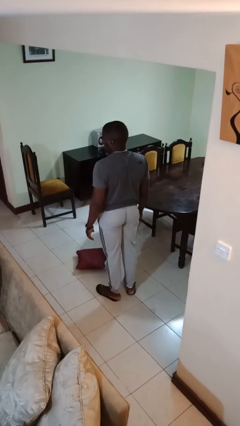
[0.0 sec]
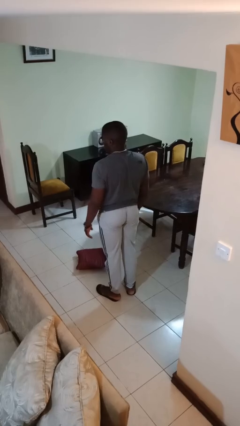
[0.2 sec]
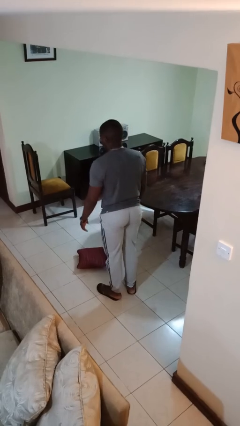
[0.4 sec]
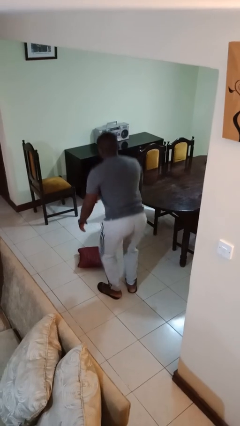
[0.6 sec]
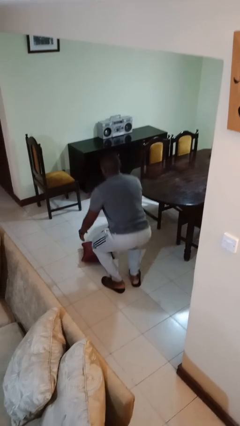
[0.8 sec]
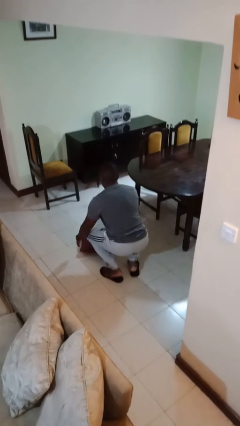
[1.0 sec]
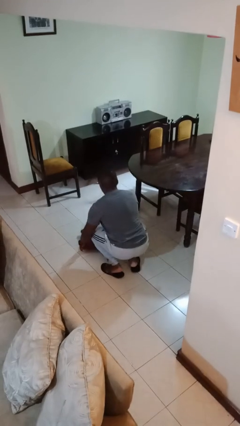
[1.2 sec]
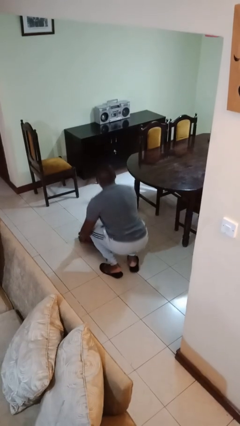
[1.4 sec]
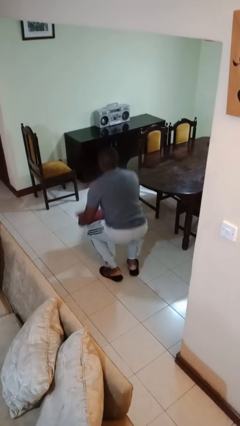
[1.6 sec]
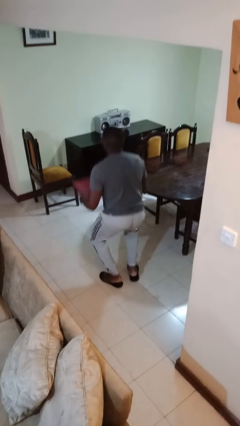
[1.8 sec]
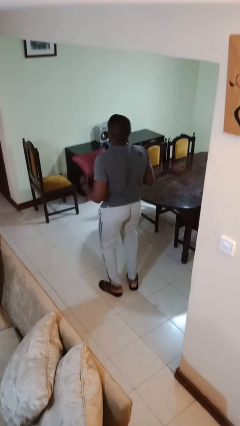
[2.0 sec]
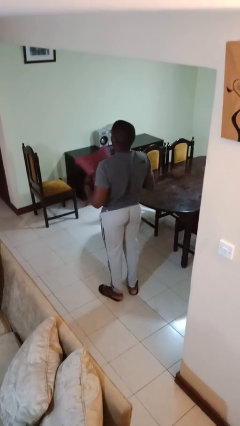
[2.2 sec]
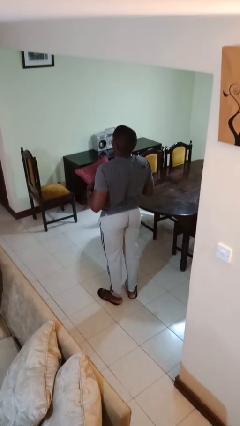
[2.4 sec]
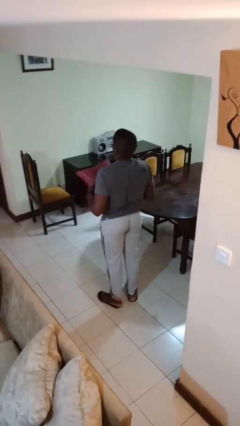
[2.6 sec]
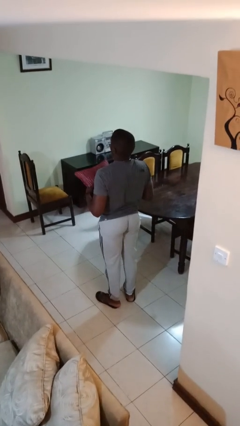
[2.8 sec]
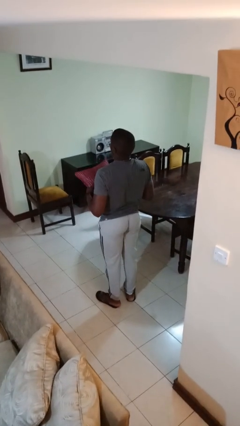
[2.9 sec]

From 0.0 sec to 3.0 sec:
person picks up object from floor

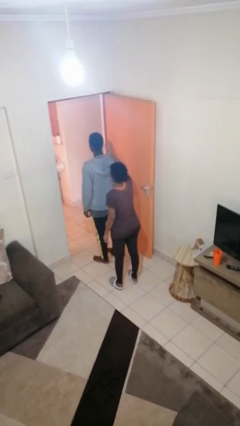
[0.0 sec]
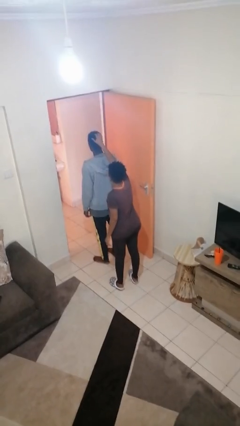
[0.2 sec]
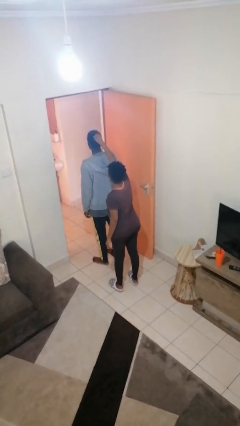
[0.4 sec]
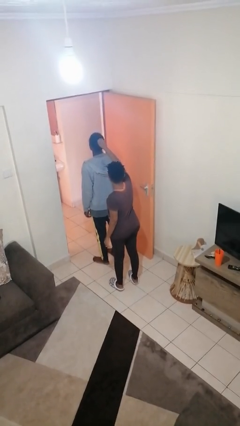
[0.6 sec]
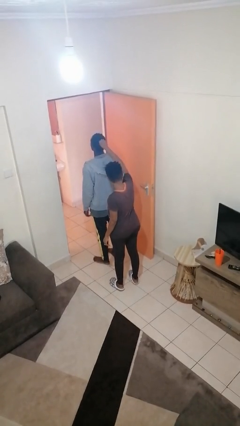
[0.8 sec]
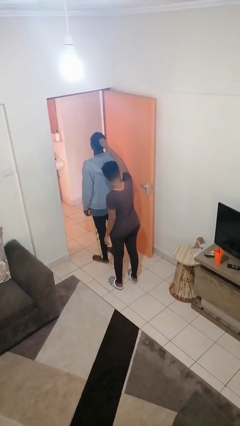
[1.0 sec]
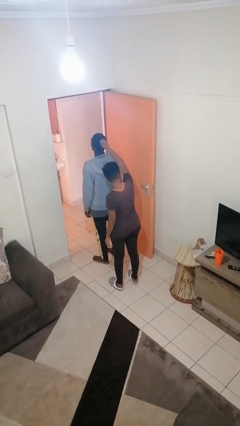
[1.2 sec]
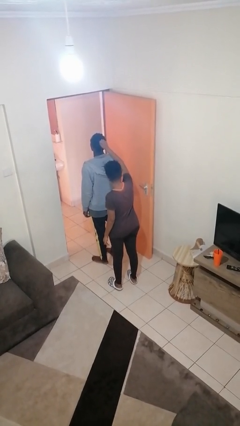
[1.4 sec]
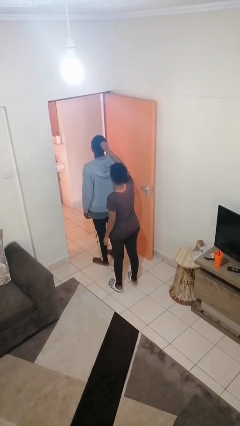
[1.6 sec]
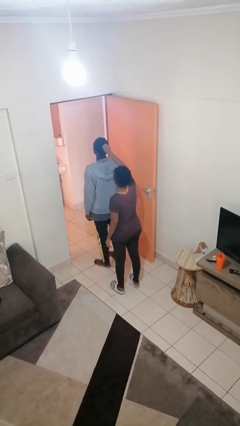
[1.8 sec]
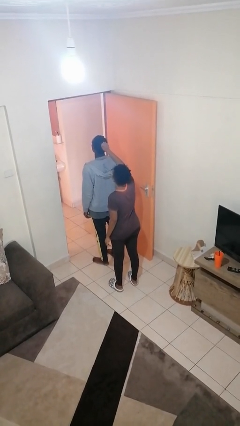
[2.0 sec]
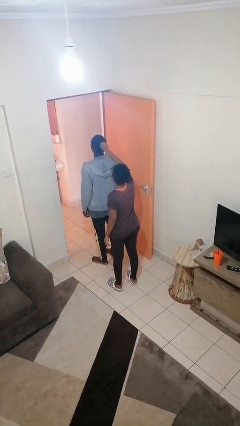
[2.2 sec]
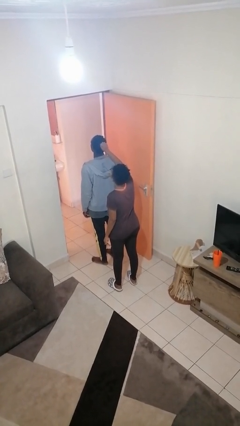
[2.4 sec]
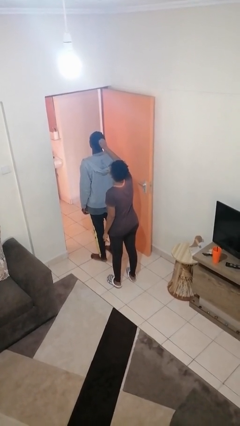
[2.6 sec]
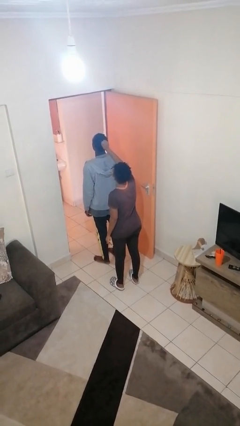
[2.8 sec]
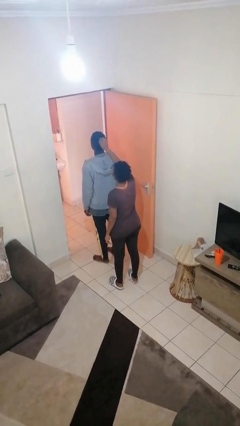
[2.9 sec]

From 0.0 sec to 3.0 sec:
person grabs person by hair

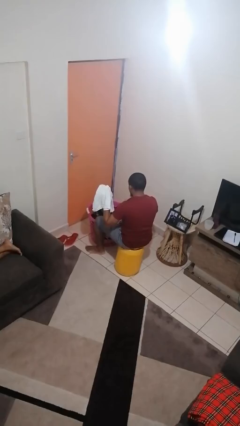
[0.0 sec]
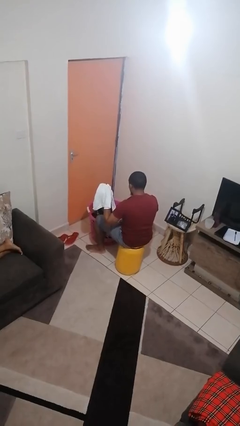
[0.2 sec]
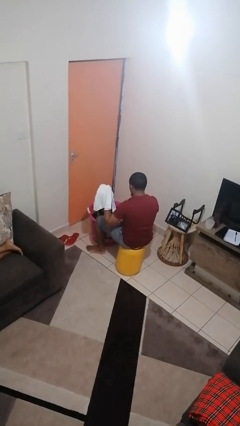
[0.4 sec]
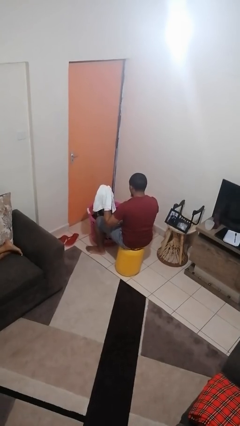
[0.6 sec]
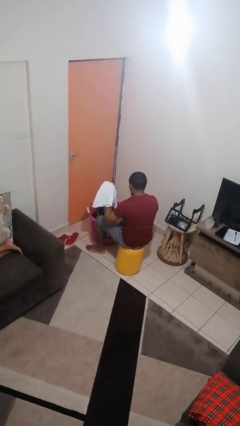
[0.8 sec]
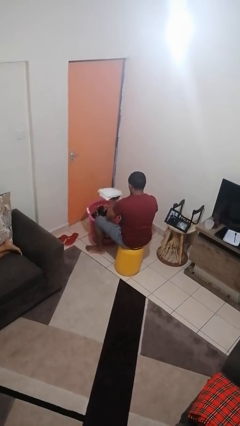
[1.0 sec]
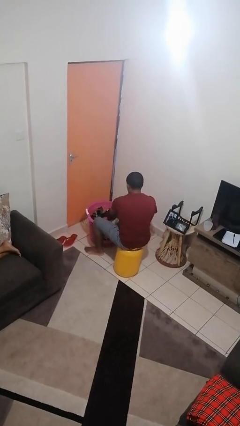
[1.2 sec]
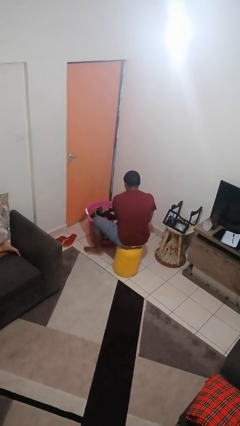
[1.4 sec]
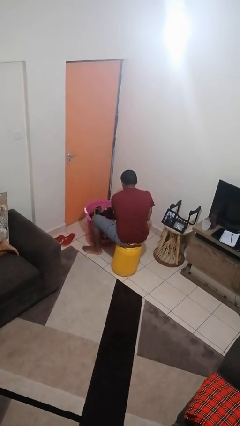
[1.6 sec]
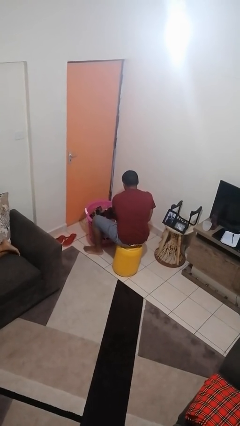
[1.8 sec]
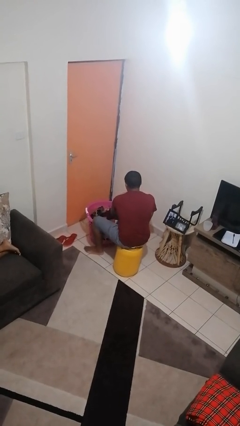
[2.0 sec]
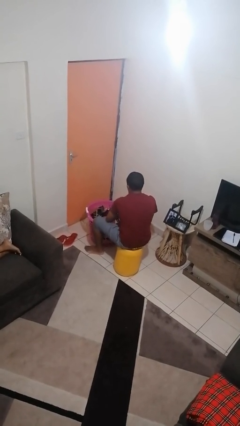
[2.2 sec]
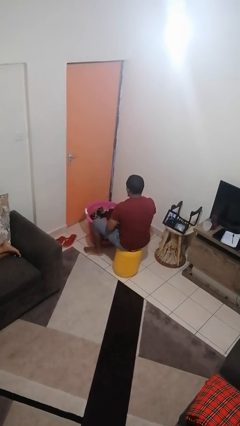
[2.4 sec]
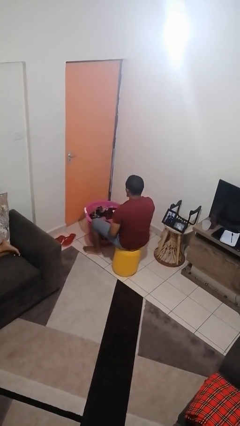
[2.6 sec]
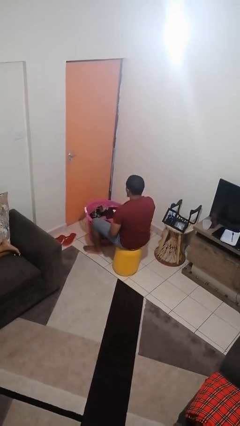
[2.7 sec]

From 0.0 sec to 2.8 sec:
person puts object into basket

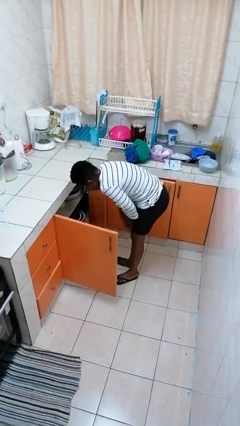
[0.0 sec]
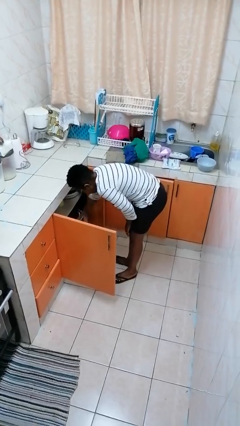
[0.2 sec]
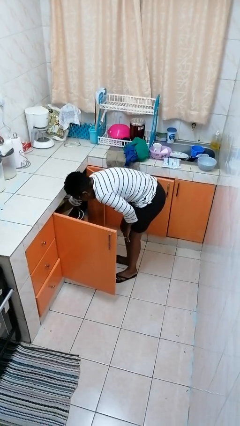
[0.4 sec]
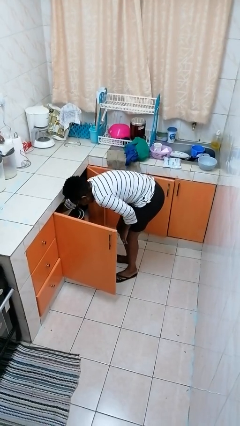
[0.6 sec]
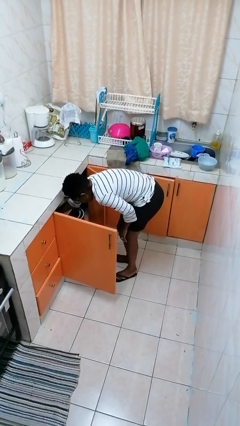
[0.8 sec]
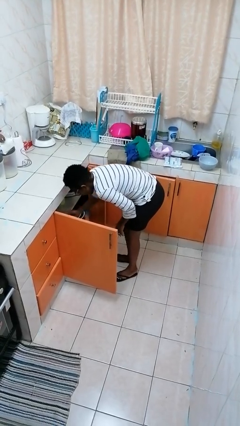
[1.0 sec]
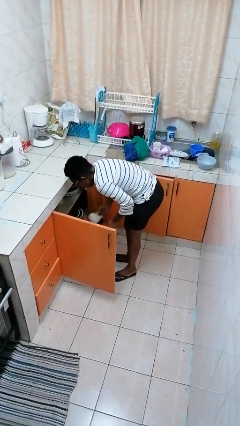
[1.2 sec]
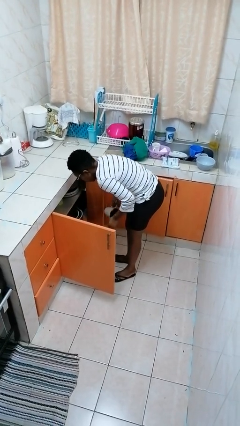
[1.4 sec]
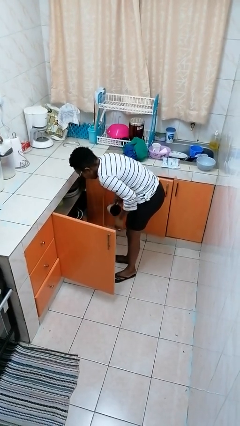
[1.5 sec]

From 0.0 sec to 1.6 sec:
person takes object from cabinet

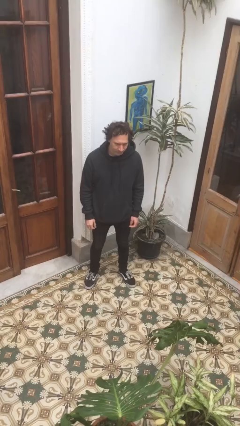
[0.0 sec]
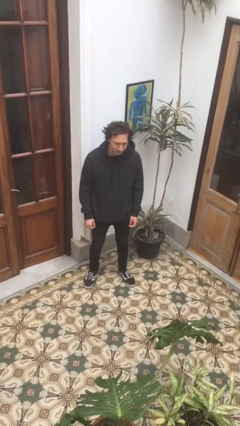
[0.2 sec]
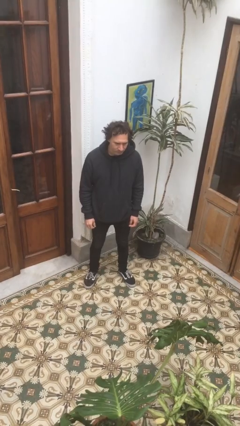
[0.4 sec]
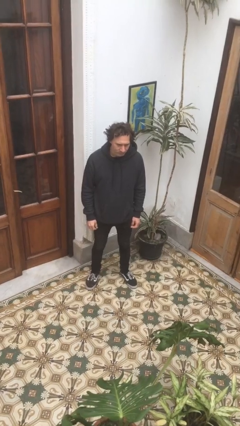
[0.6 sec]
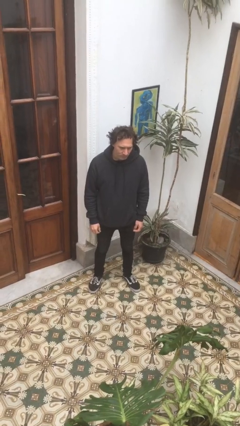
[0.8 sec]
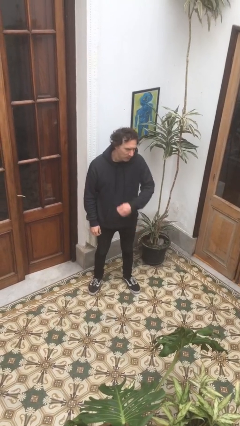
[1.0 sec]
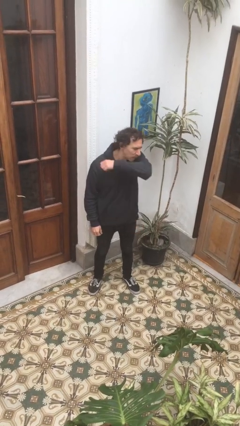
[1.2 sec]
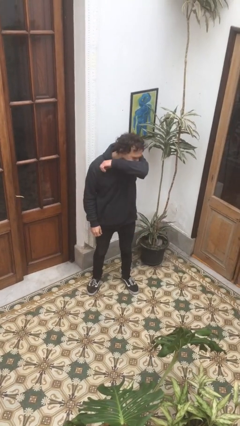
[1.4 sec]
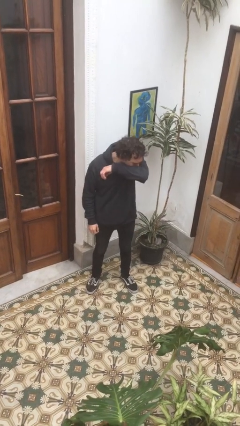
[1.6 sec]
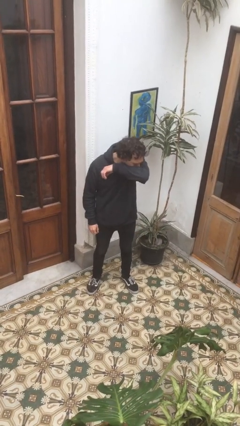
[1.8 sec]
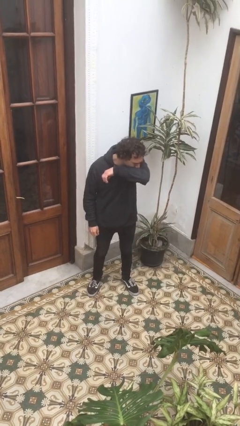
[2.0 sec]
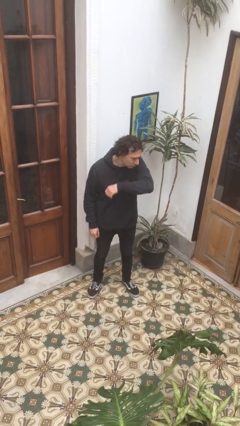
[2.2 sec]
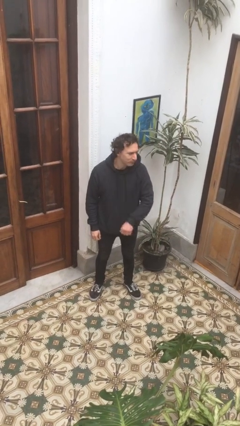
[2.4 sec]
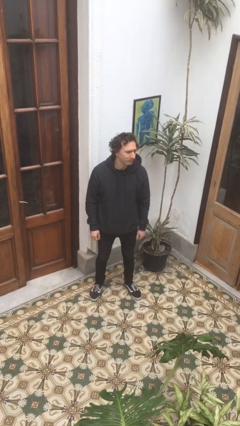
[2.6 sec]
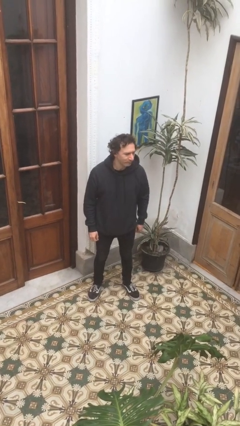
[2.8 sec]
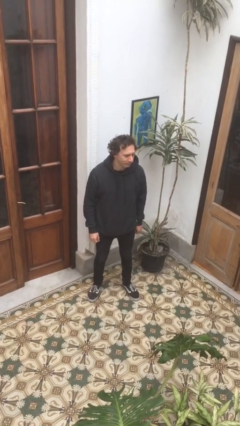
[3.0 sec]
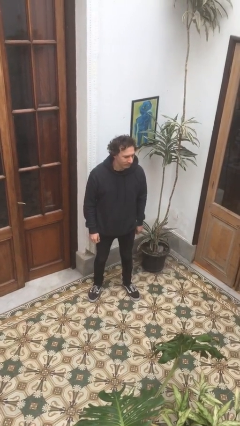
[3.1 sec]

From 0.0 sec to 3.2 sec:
person sneezes into arm

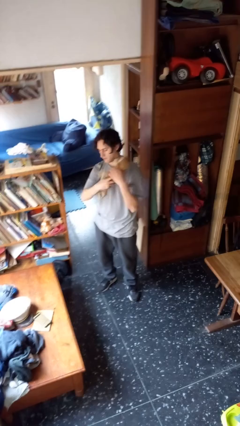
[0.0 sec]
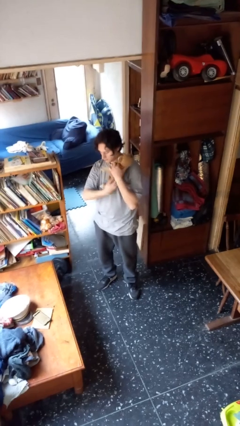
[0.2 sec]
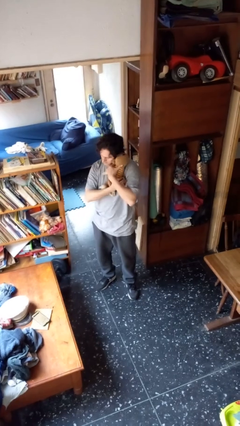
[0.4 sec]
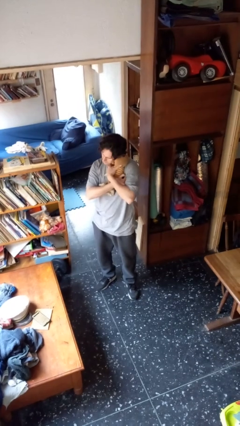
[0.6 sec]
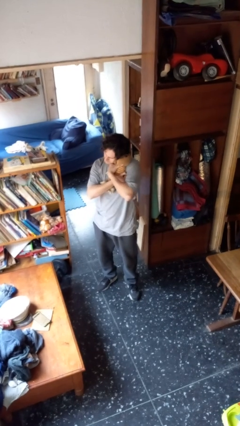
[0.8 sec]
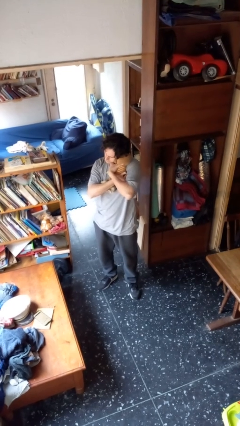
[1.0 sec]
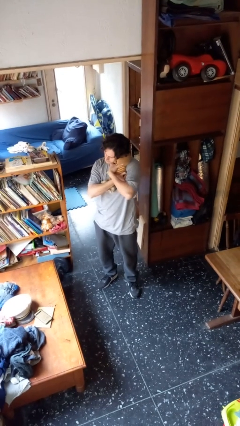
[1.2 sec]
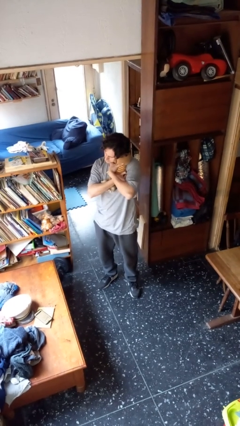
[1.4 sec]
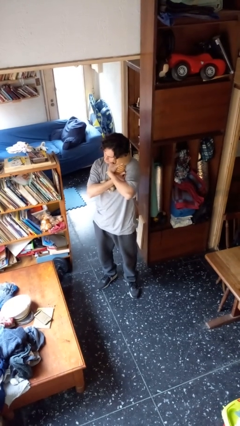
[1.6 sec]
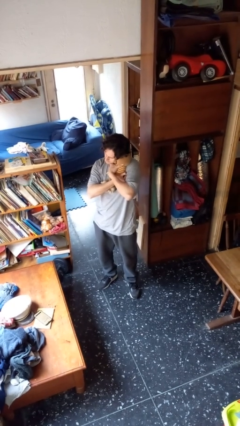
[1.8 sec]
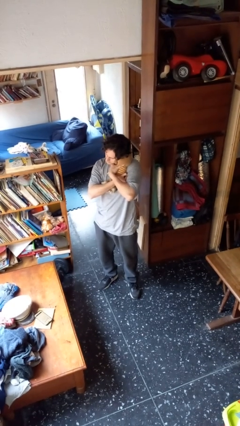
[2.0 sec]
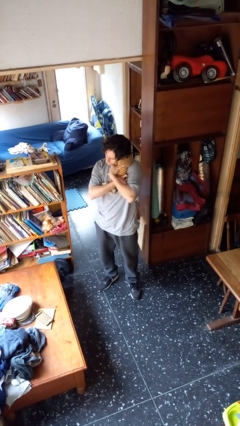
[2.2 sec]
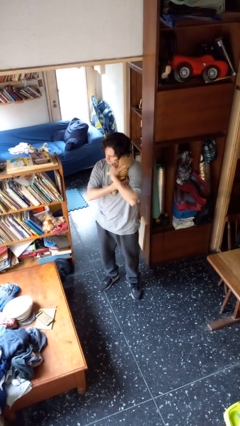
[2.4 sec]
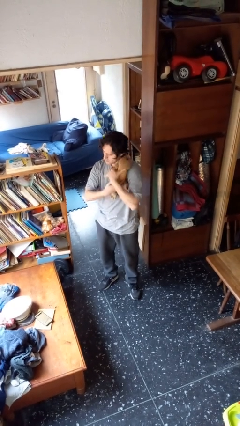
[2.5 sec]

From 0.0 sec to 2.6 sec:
person hugs stuffed animal

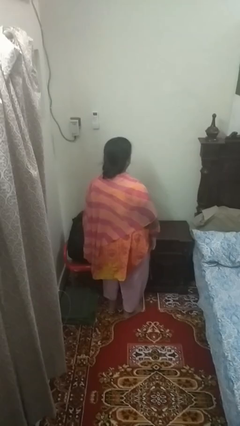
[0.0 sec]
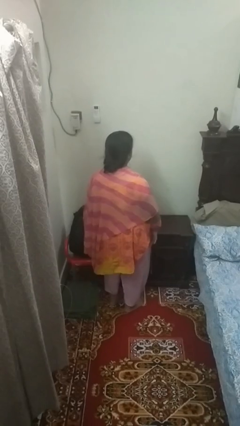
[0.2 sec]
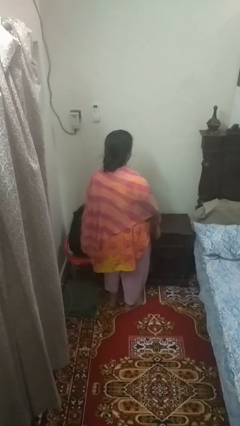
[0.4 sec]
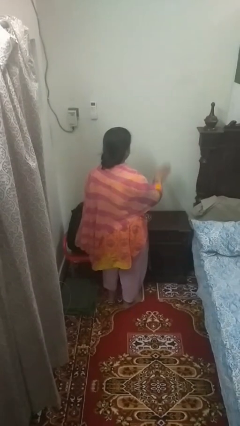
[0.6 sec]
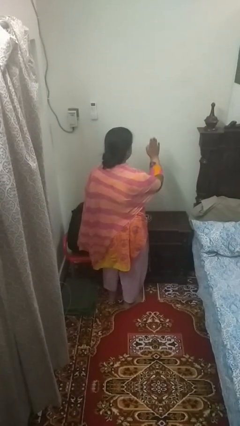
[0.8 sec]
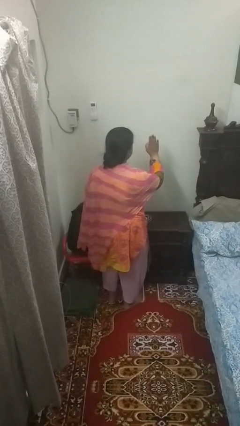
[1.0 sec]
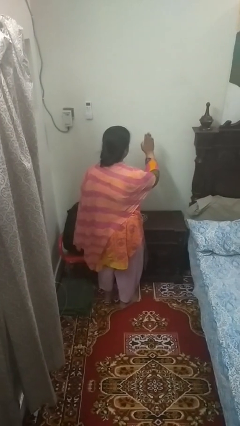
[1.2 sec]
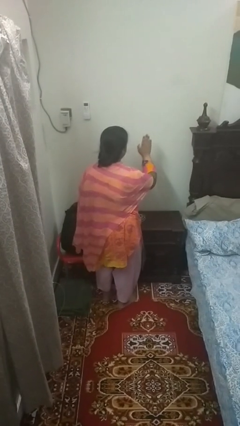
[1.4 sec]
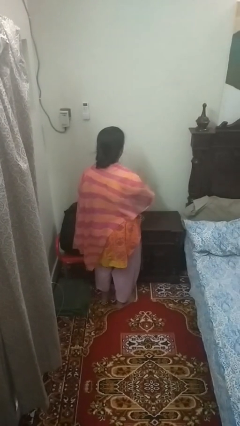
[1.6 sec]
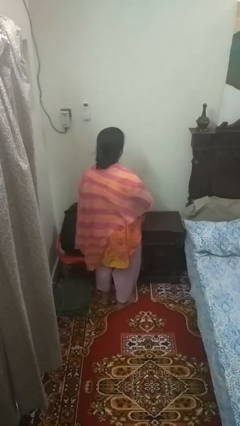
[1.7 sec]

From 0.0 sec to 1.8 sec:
person gestures stop
